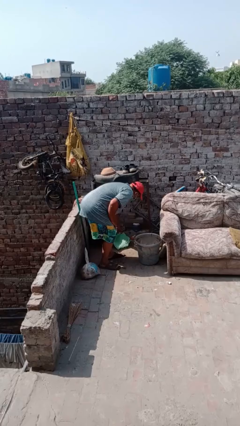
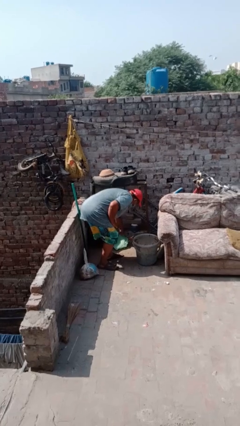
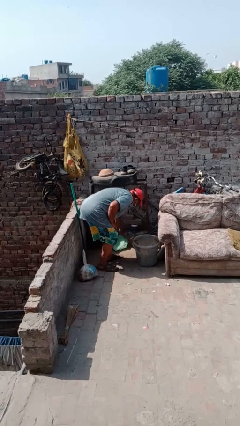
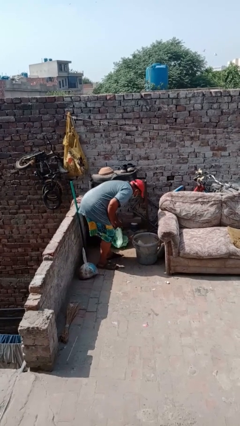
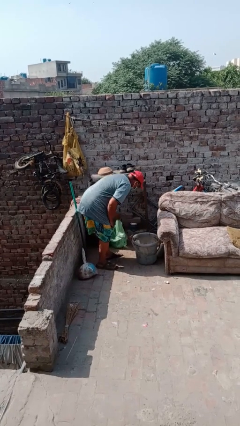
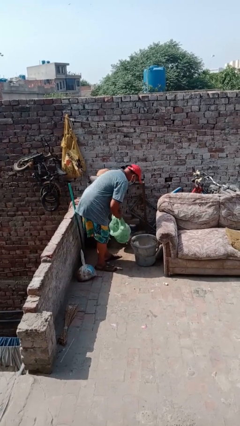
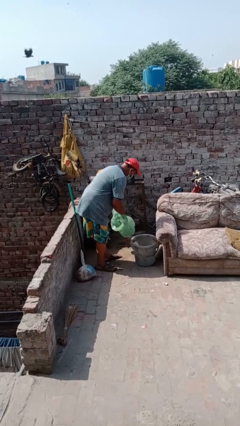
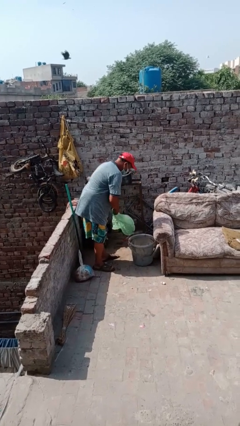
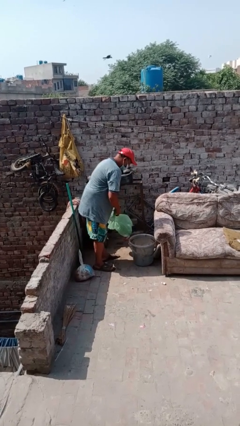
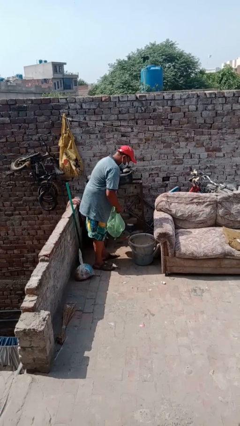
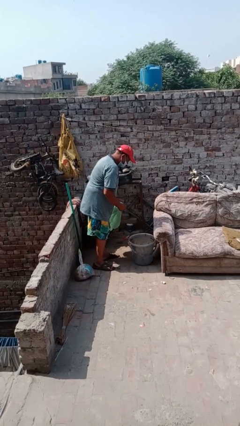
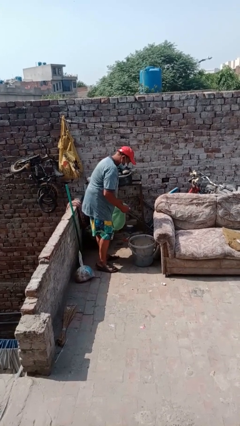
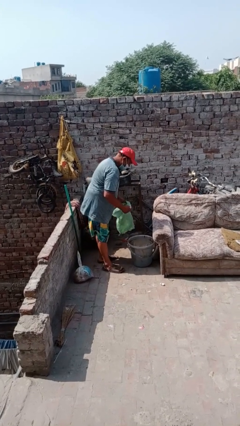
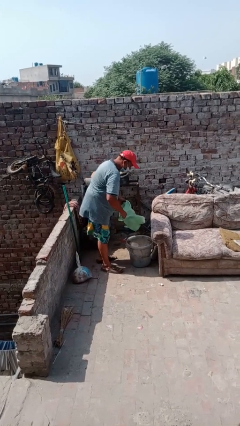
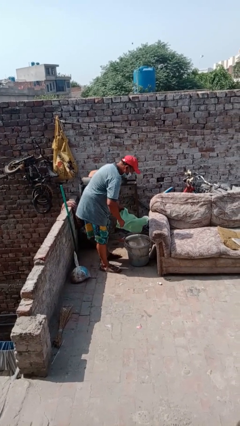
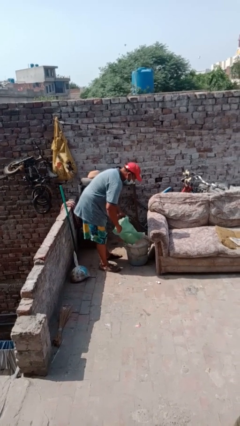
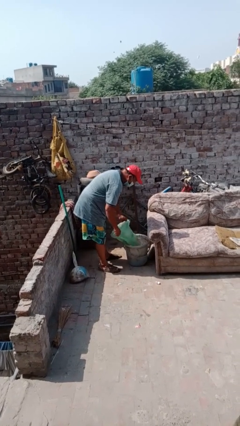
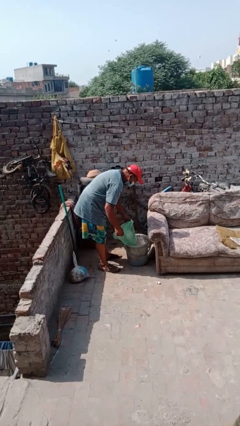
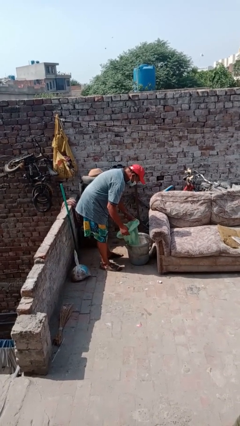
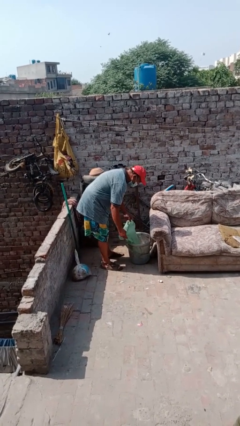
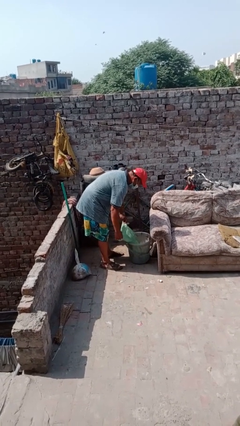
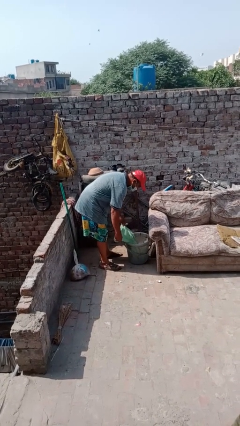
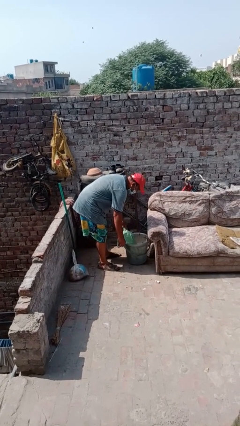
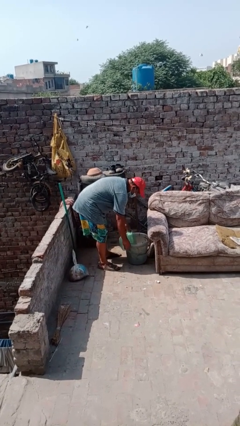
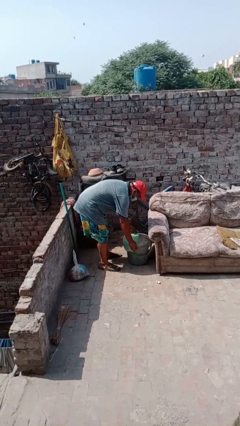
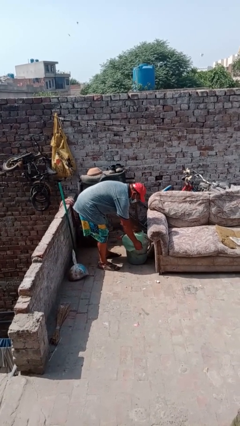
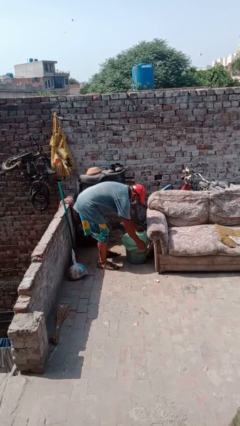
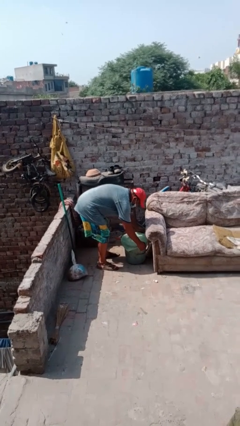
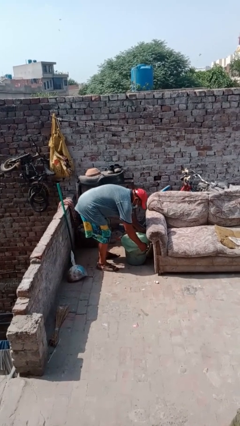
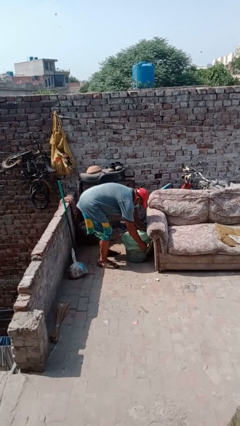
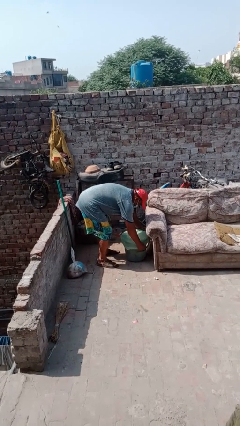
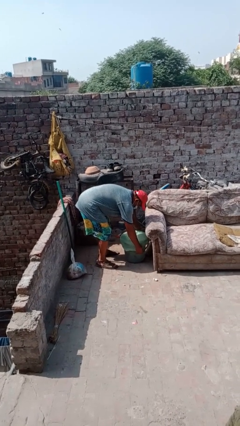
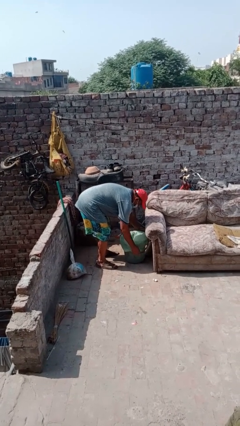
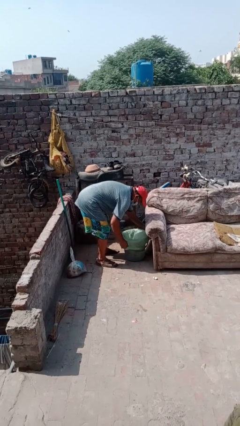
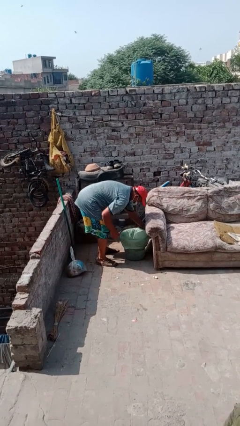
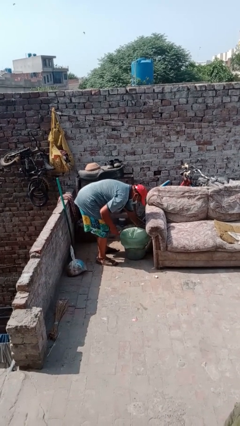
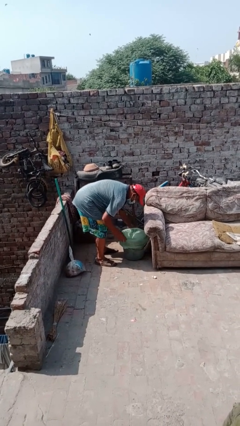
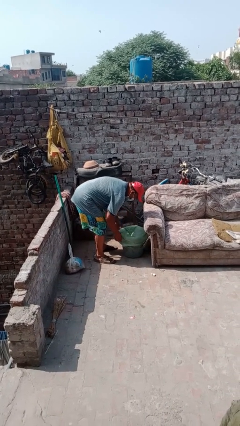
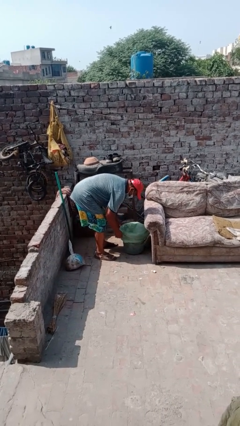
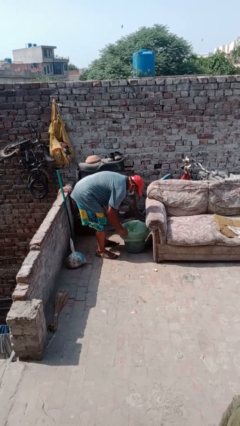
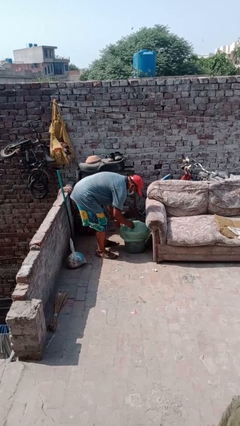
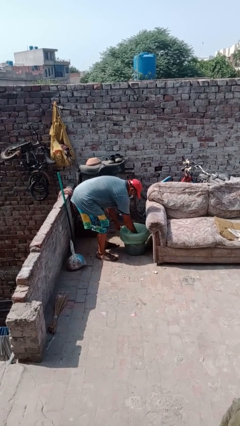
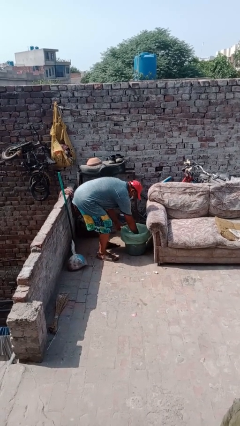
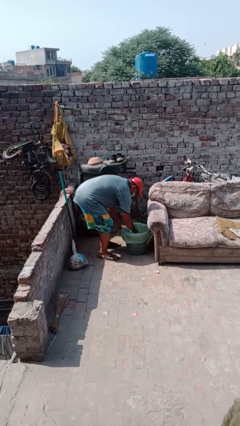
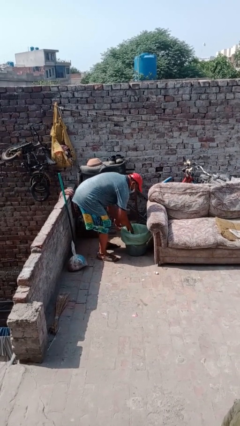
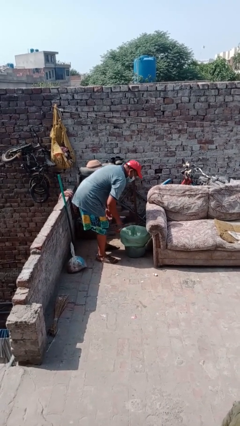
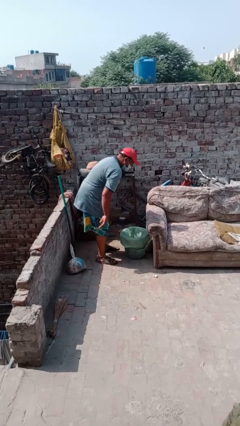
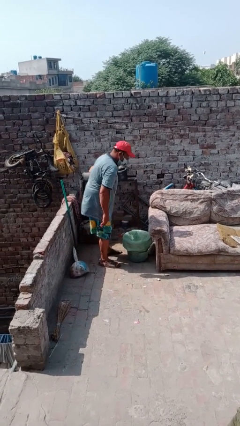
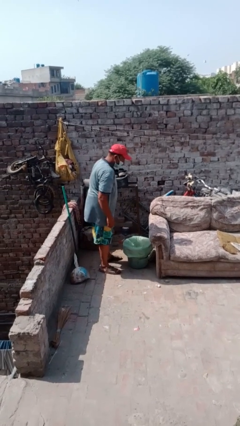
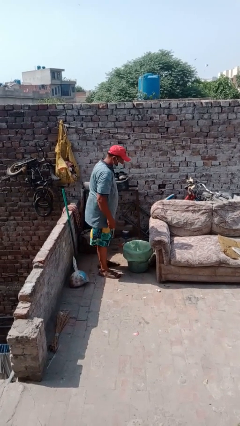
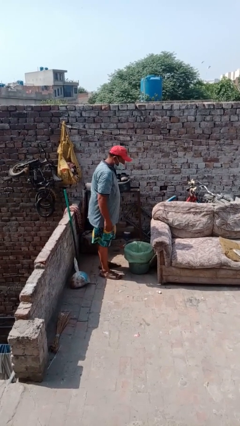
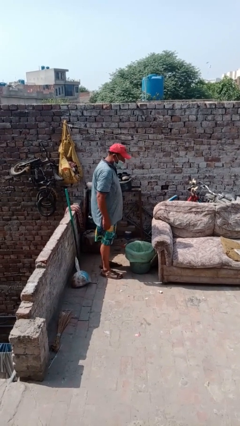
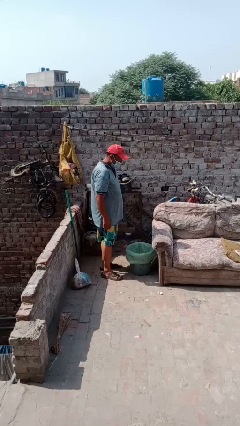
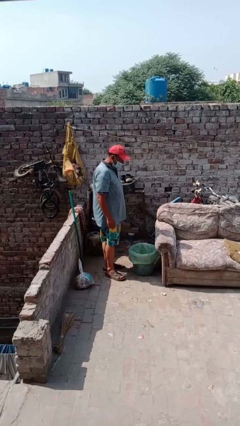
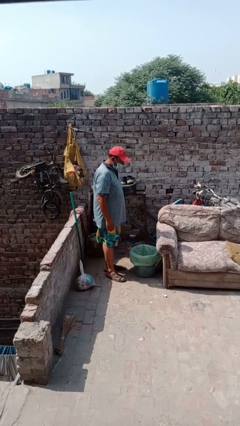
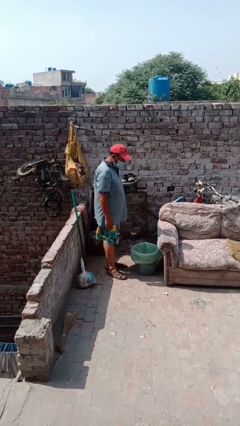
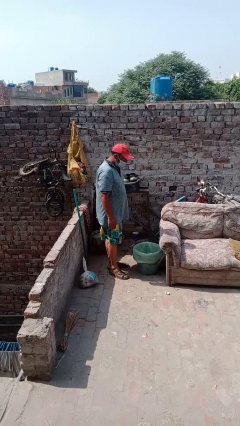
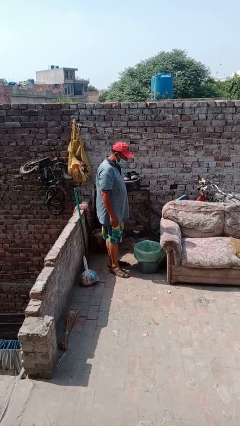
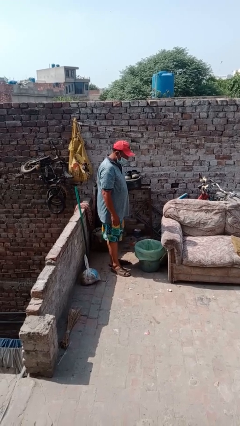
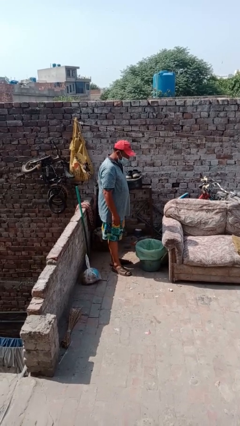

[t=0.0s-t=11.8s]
person inserts trashbag into trashcan

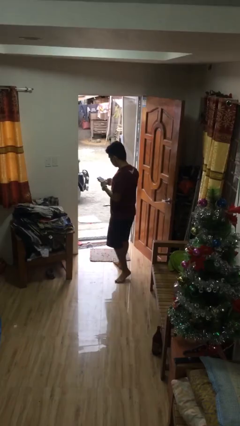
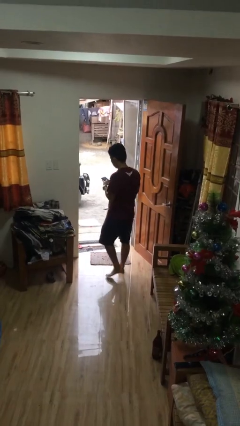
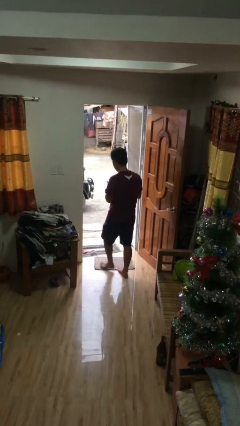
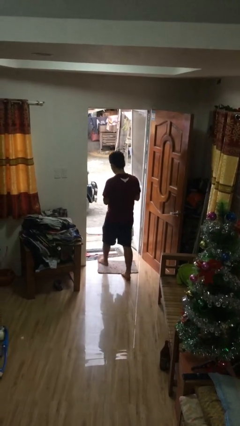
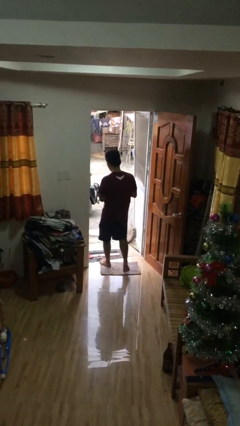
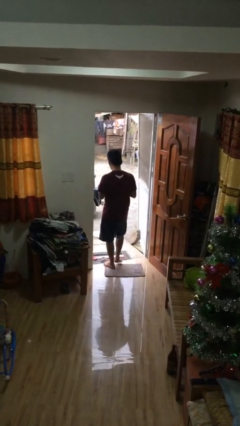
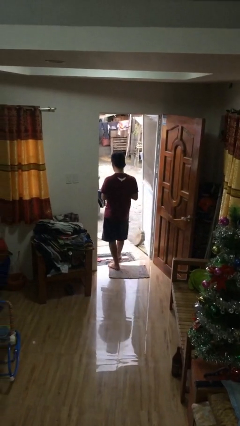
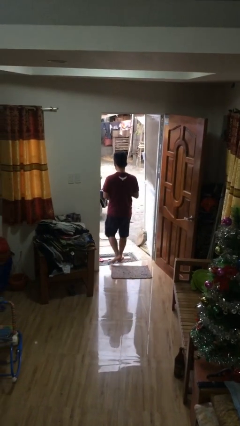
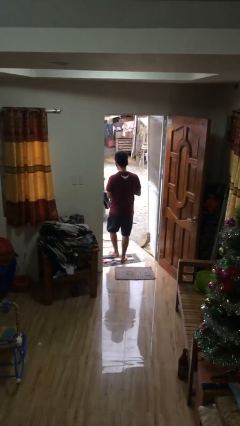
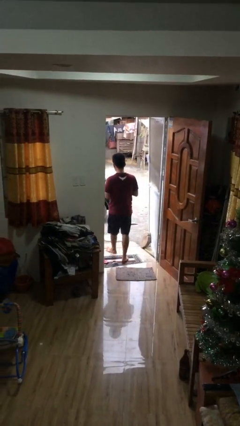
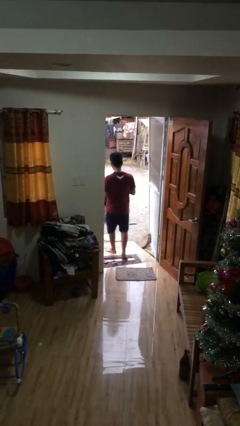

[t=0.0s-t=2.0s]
person exits scene through structure

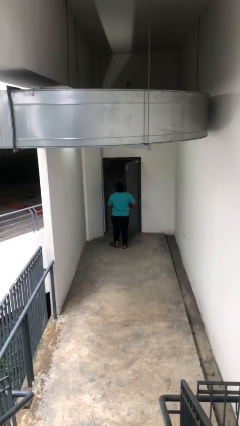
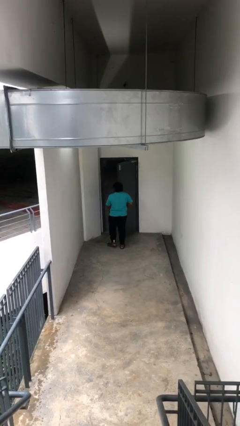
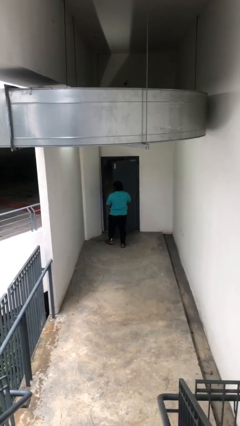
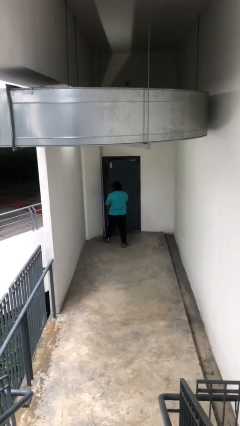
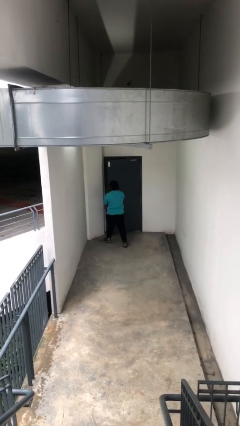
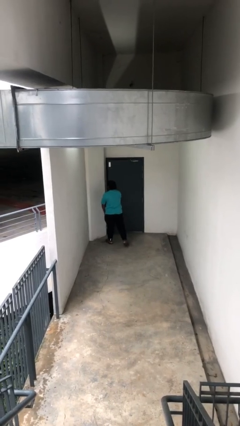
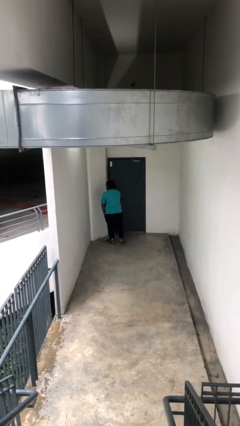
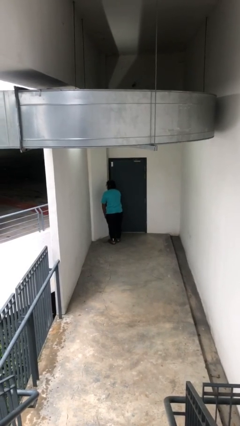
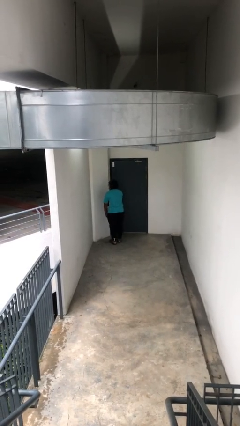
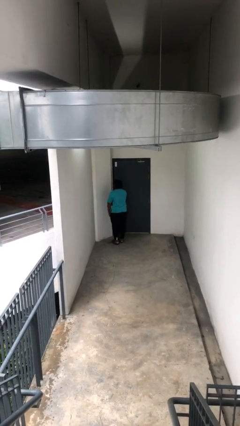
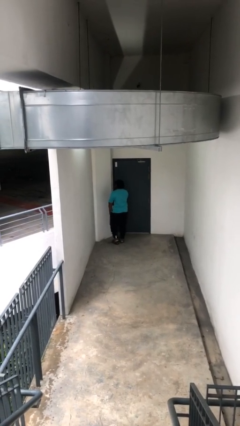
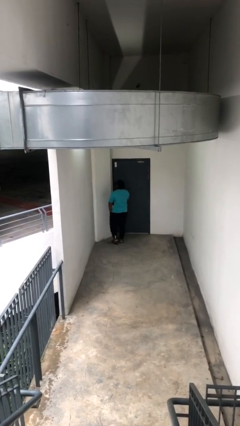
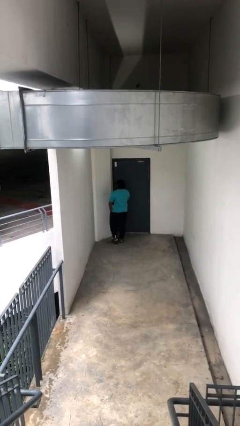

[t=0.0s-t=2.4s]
person closes facility door

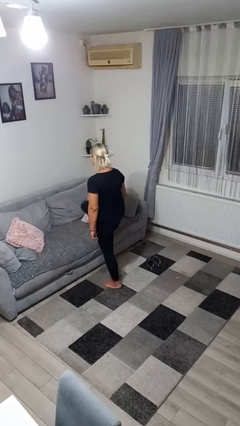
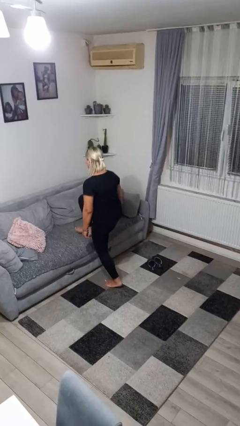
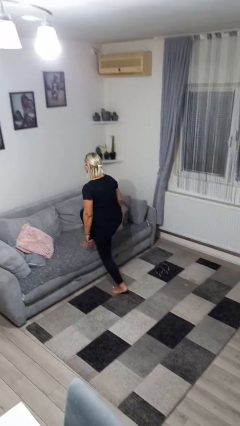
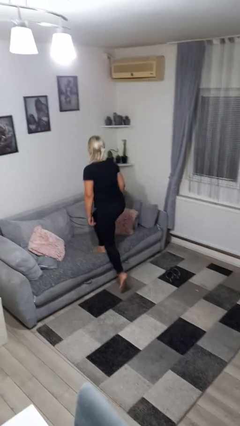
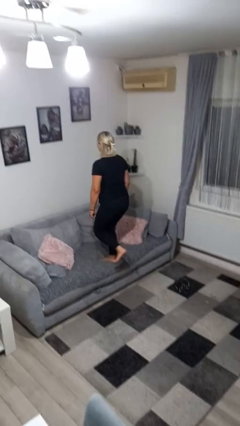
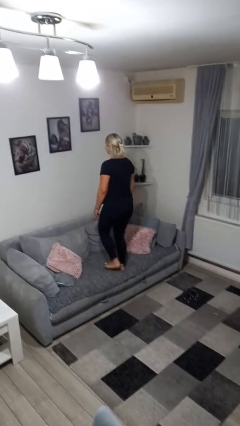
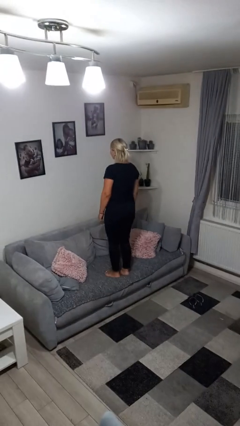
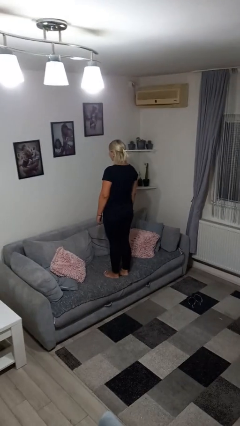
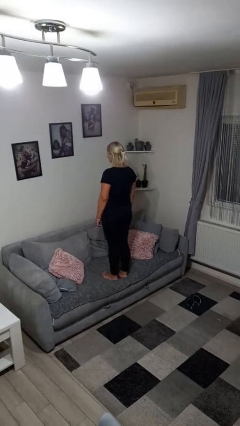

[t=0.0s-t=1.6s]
person climbs on couch
